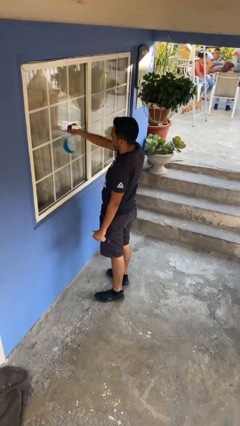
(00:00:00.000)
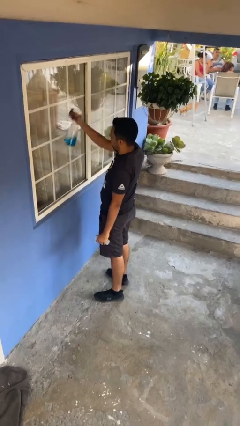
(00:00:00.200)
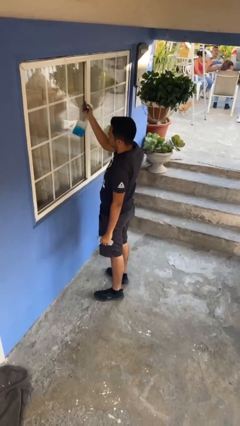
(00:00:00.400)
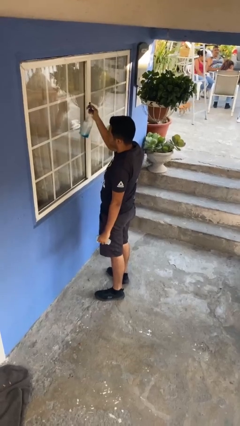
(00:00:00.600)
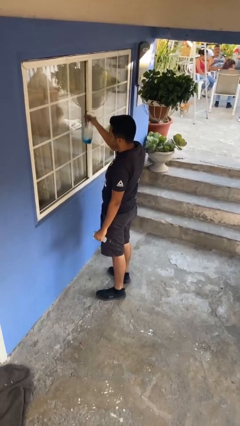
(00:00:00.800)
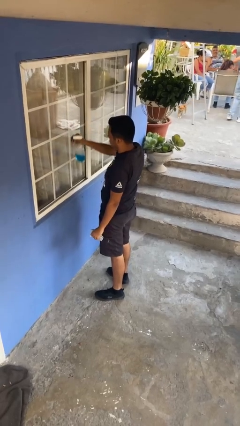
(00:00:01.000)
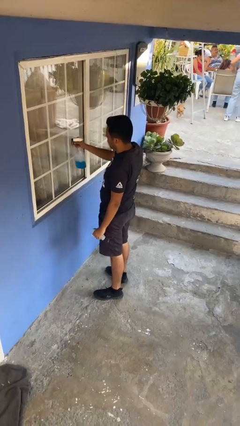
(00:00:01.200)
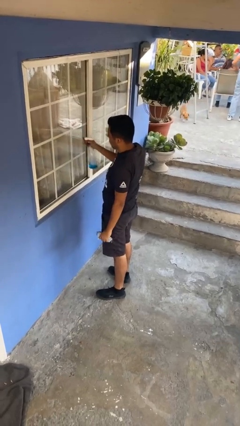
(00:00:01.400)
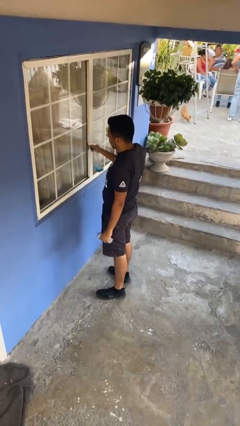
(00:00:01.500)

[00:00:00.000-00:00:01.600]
person sprays from bottle

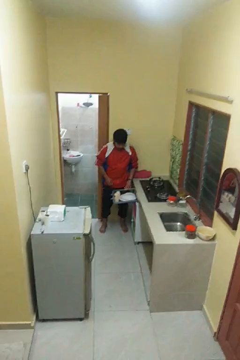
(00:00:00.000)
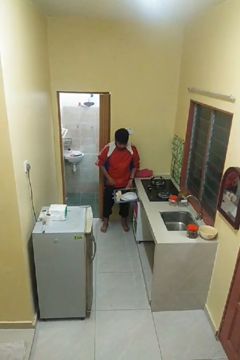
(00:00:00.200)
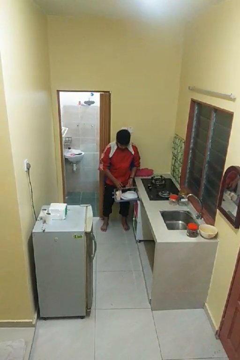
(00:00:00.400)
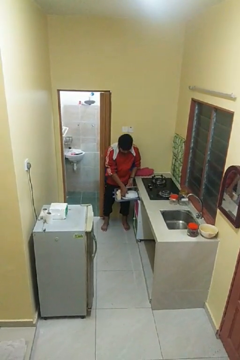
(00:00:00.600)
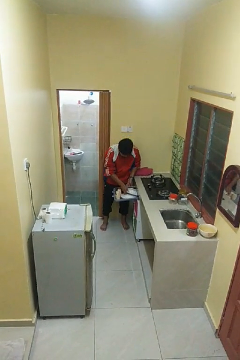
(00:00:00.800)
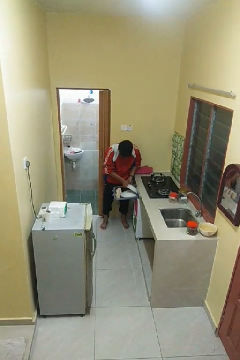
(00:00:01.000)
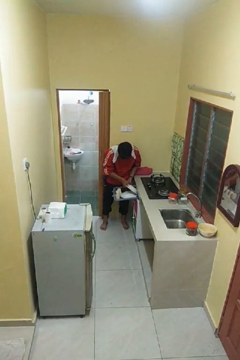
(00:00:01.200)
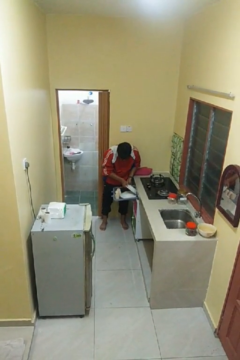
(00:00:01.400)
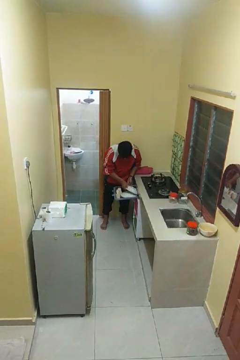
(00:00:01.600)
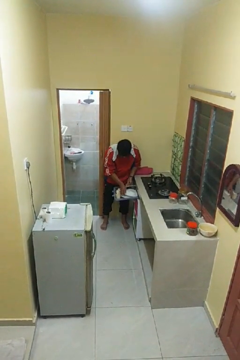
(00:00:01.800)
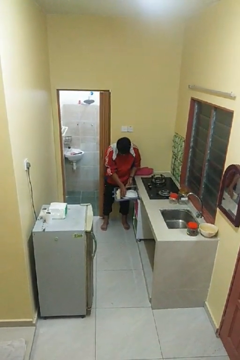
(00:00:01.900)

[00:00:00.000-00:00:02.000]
person searches in kitchen drawer

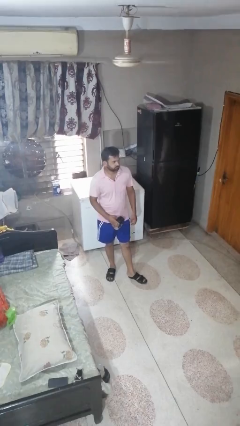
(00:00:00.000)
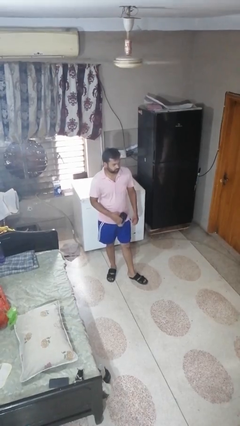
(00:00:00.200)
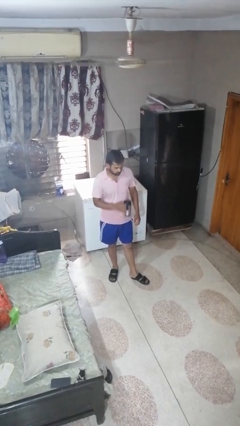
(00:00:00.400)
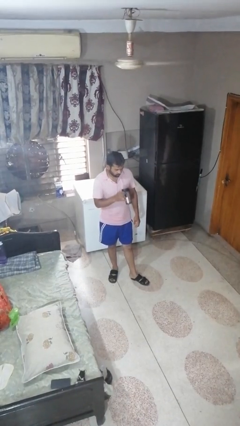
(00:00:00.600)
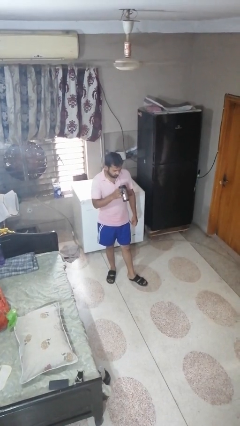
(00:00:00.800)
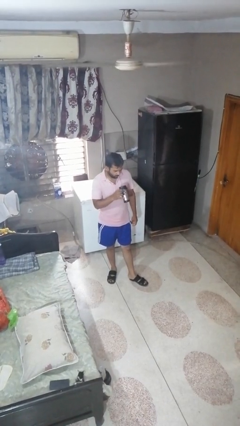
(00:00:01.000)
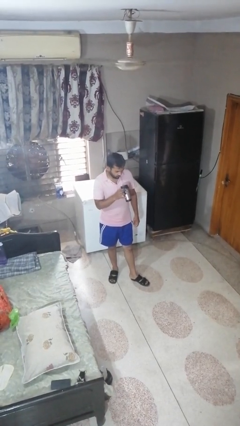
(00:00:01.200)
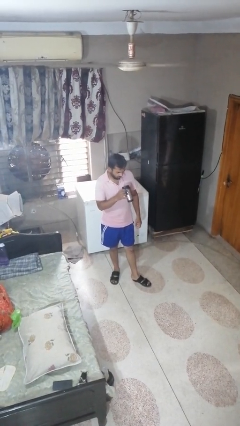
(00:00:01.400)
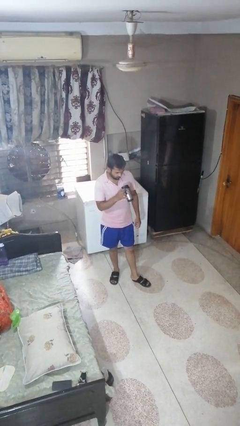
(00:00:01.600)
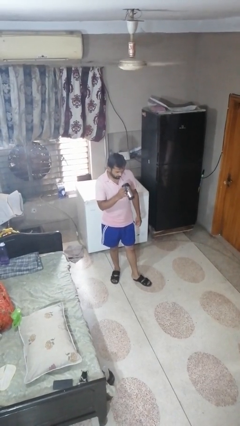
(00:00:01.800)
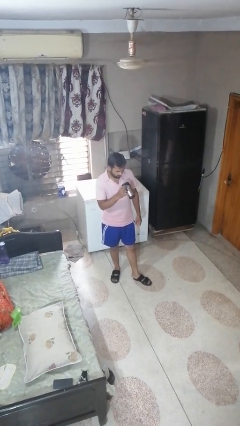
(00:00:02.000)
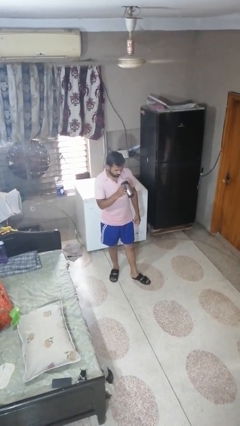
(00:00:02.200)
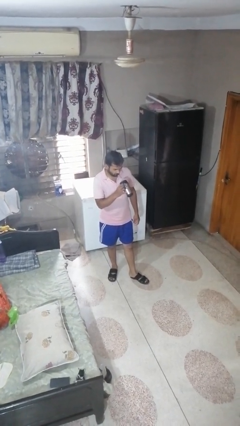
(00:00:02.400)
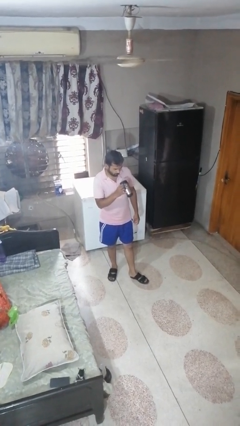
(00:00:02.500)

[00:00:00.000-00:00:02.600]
person drinks from straw

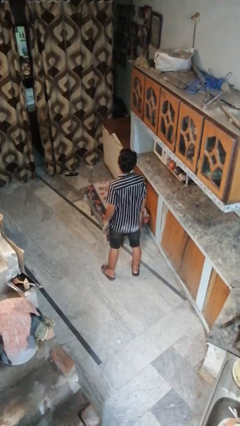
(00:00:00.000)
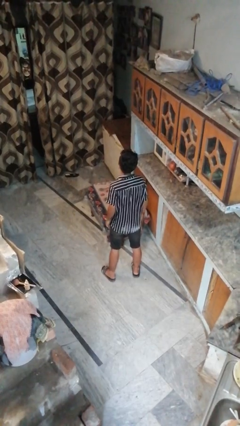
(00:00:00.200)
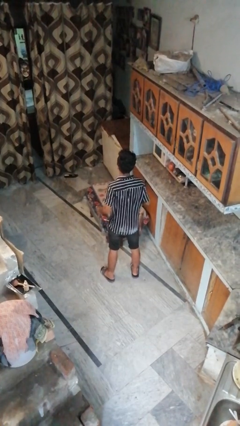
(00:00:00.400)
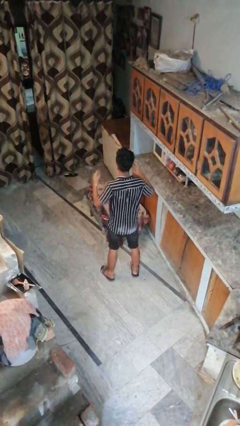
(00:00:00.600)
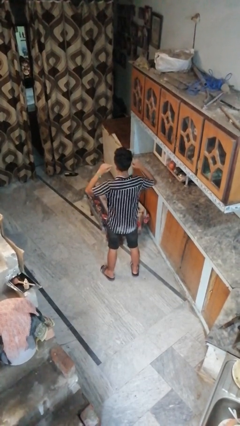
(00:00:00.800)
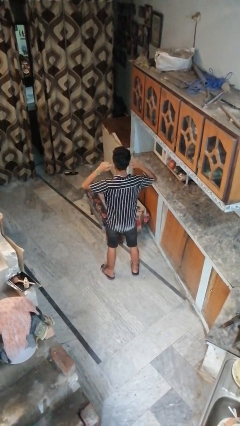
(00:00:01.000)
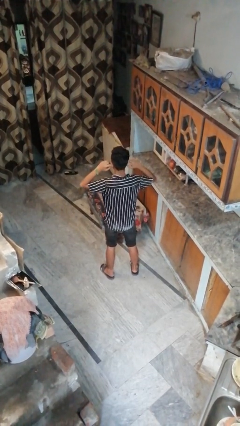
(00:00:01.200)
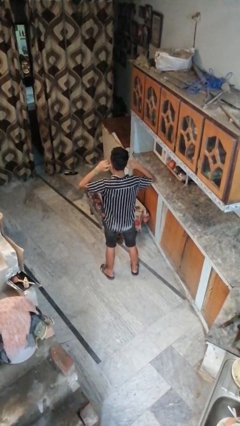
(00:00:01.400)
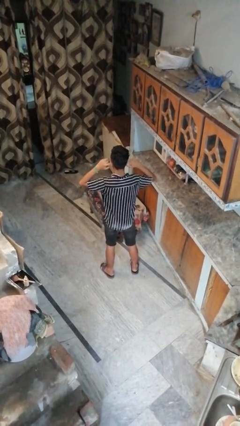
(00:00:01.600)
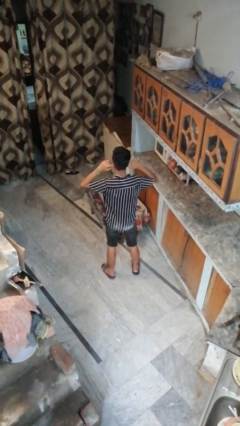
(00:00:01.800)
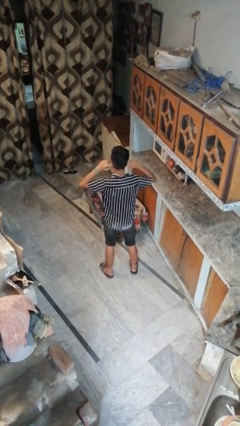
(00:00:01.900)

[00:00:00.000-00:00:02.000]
person puts fingers in ear

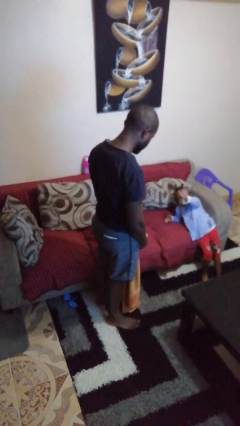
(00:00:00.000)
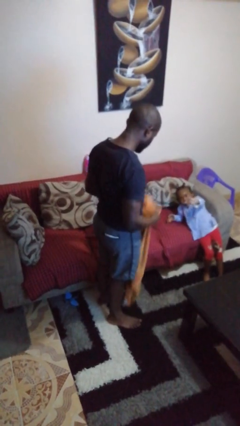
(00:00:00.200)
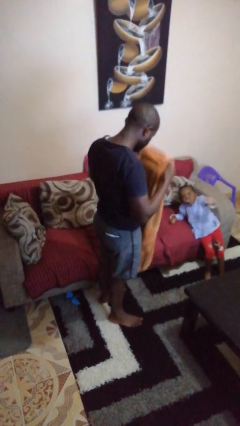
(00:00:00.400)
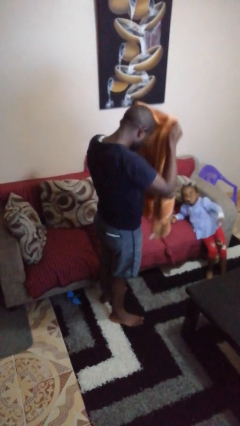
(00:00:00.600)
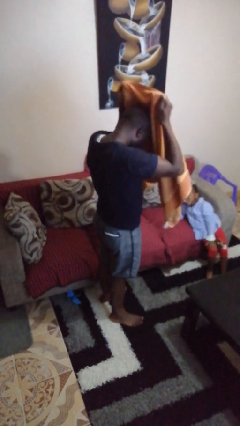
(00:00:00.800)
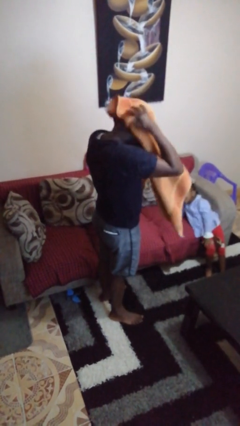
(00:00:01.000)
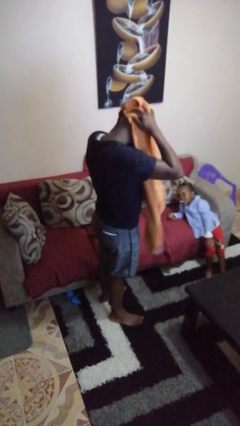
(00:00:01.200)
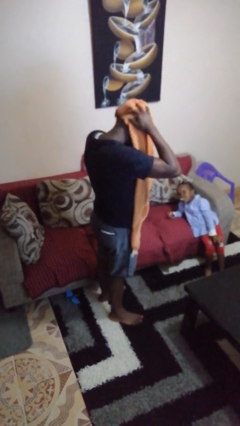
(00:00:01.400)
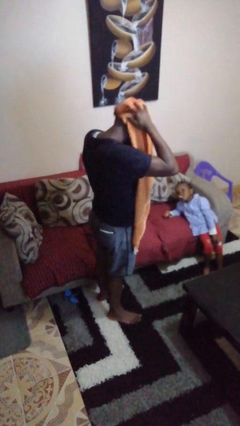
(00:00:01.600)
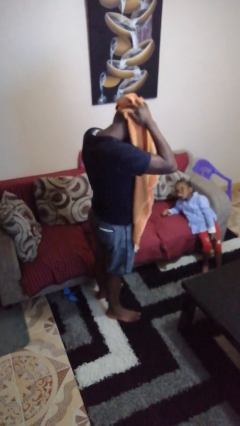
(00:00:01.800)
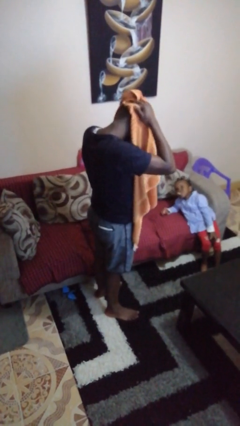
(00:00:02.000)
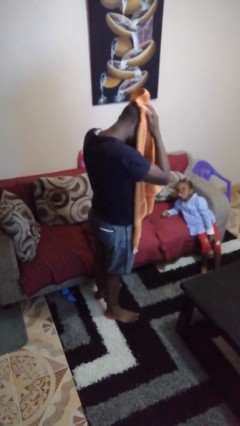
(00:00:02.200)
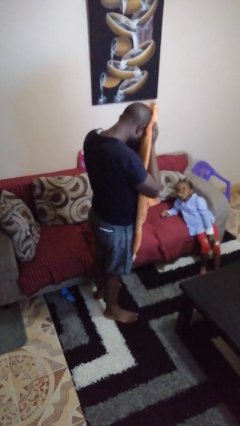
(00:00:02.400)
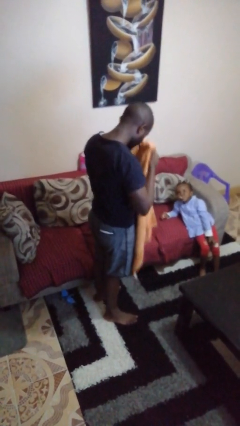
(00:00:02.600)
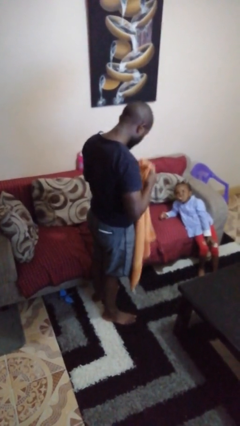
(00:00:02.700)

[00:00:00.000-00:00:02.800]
person dries hair with towel

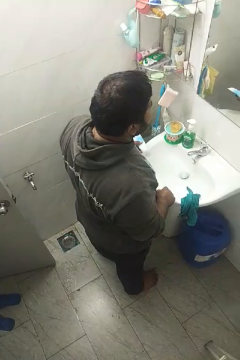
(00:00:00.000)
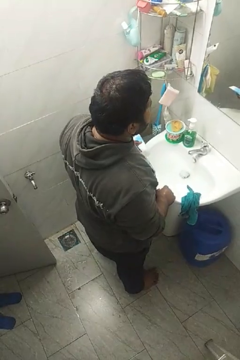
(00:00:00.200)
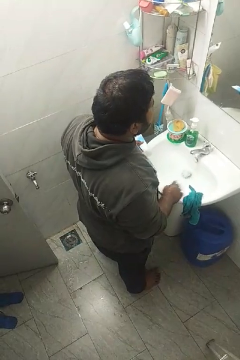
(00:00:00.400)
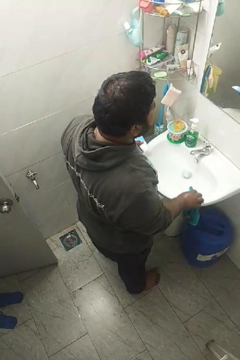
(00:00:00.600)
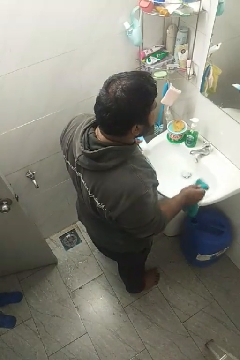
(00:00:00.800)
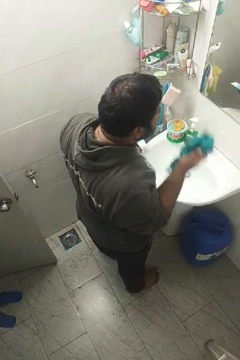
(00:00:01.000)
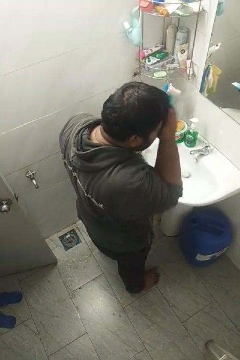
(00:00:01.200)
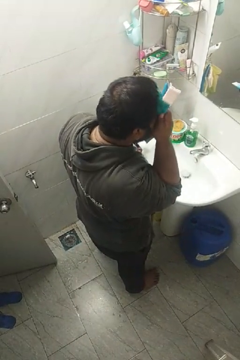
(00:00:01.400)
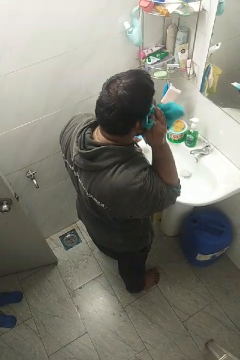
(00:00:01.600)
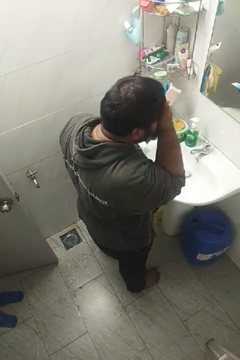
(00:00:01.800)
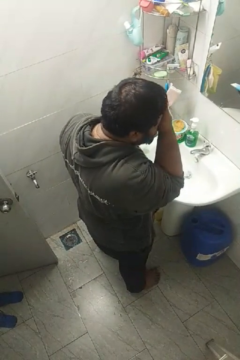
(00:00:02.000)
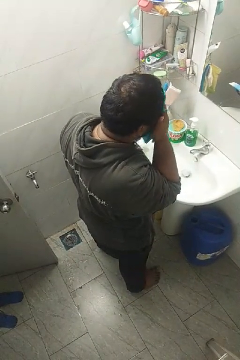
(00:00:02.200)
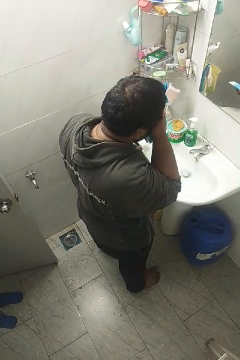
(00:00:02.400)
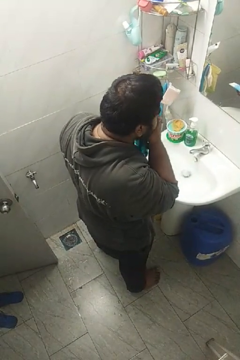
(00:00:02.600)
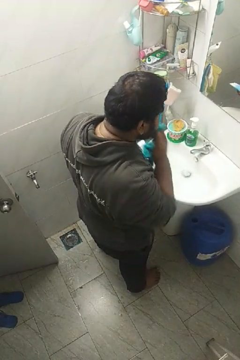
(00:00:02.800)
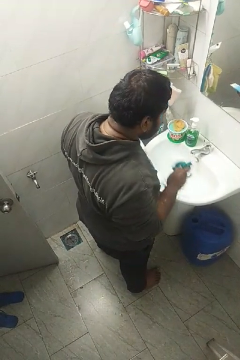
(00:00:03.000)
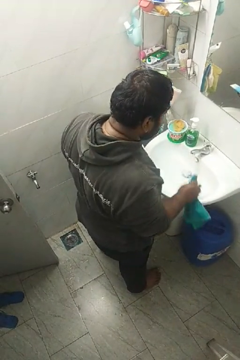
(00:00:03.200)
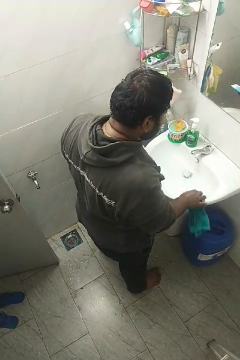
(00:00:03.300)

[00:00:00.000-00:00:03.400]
person dries face with towel

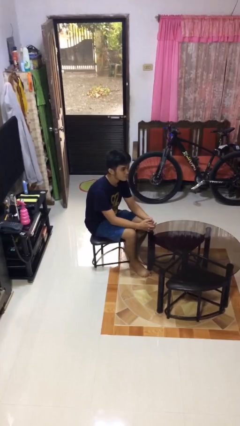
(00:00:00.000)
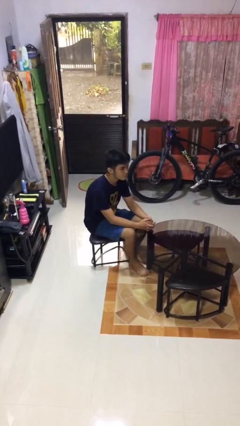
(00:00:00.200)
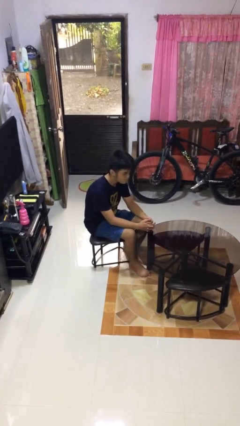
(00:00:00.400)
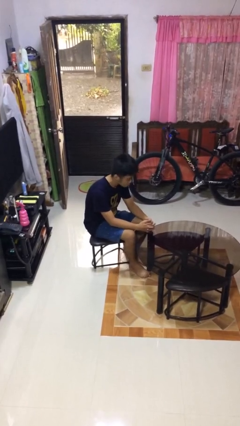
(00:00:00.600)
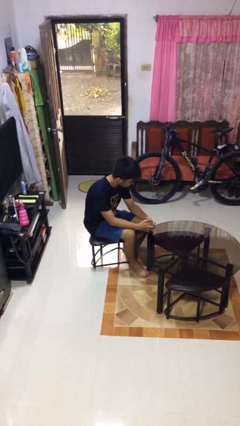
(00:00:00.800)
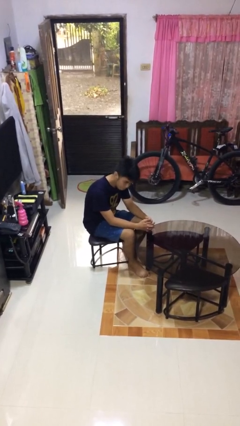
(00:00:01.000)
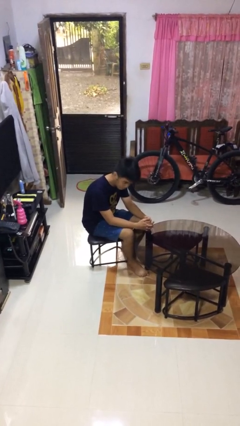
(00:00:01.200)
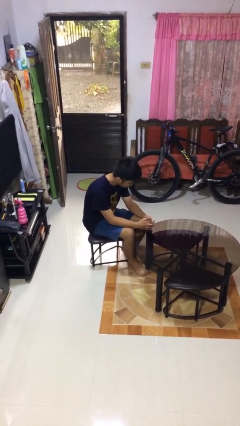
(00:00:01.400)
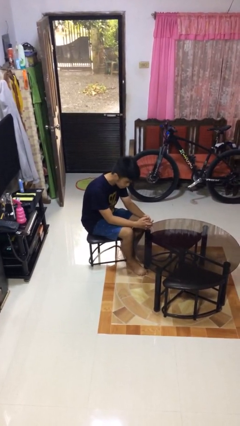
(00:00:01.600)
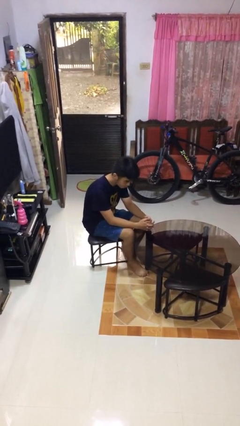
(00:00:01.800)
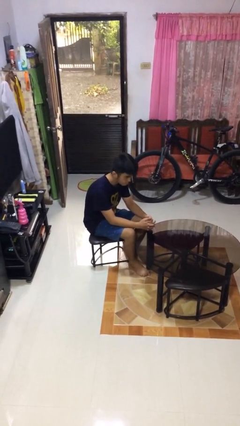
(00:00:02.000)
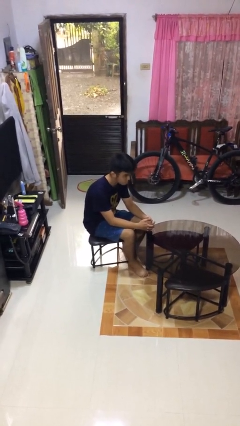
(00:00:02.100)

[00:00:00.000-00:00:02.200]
person shakes head

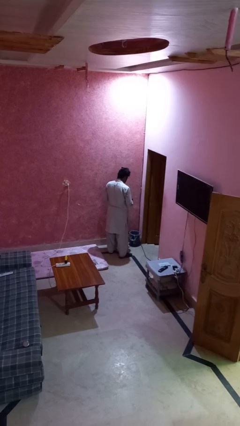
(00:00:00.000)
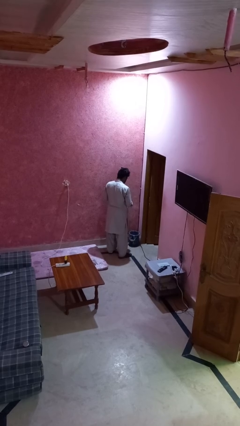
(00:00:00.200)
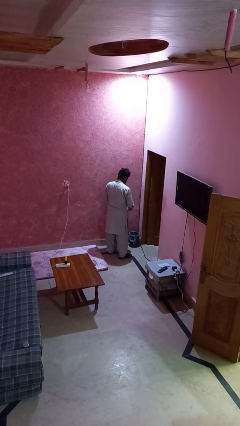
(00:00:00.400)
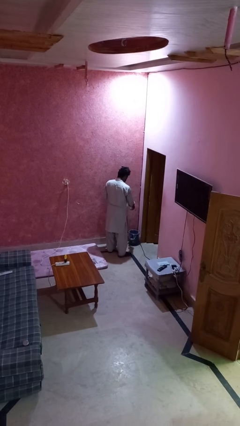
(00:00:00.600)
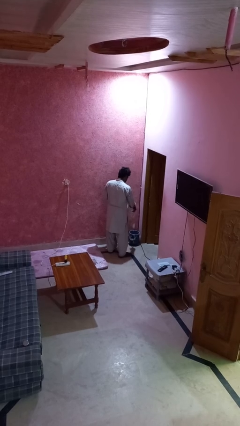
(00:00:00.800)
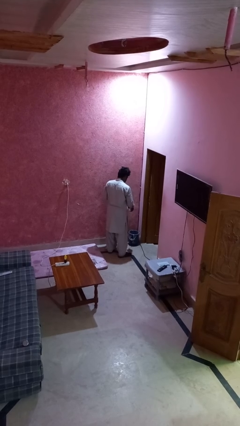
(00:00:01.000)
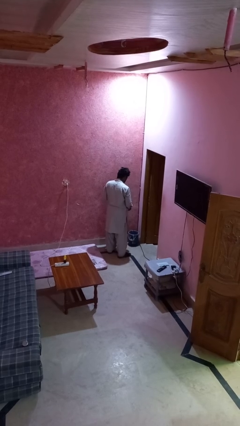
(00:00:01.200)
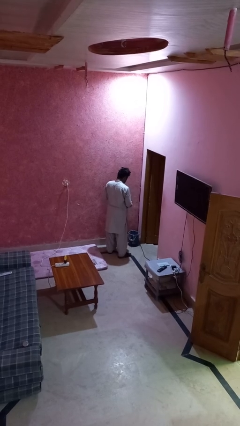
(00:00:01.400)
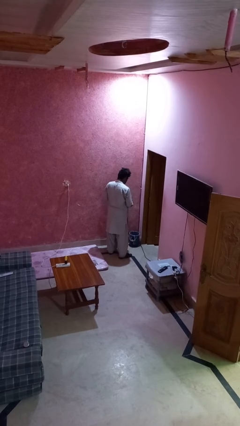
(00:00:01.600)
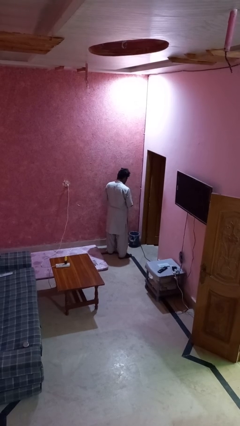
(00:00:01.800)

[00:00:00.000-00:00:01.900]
person discards trash
